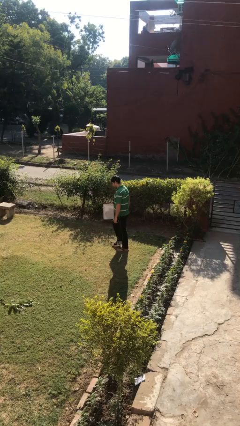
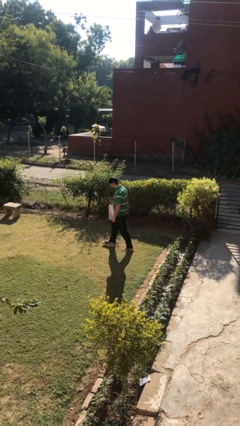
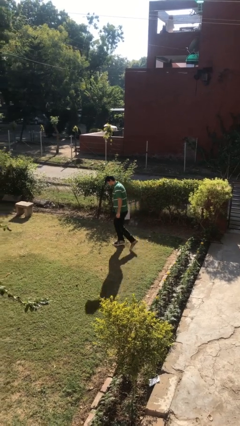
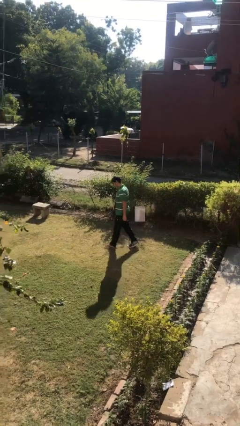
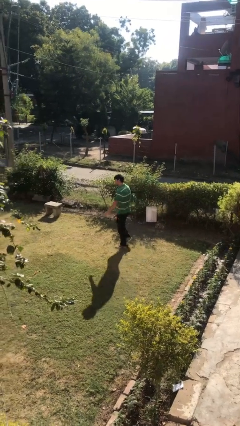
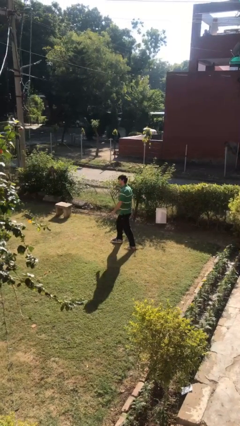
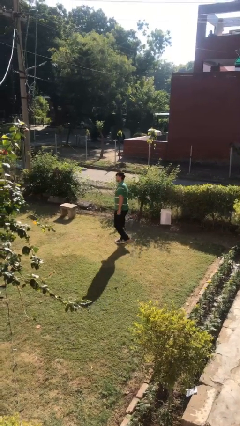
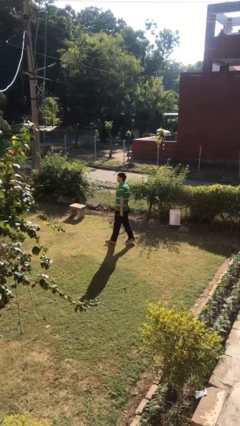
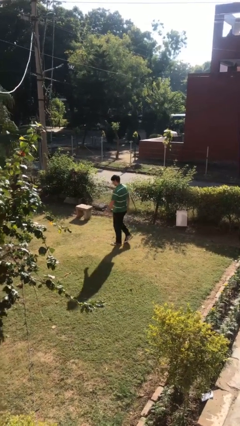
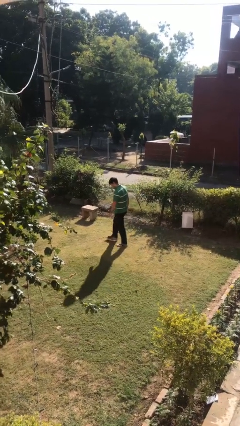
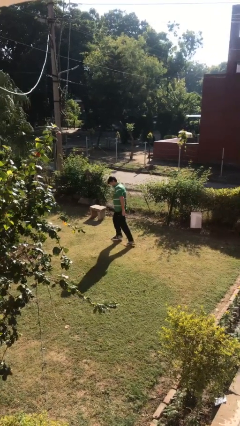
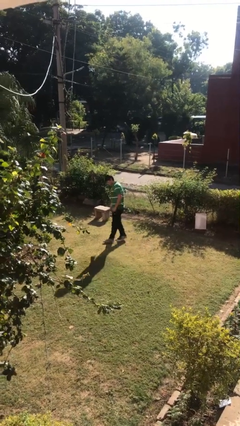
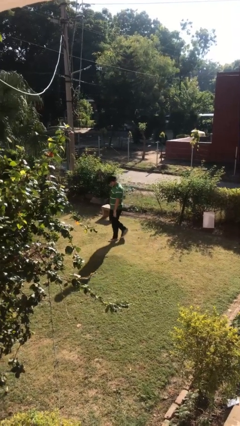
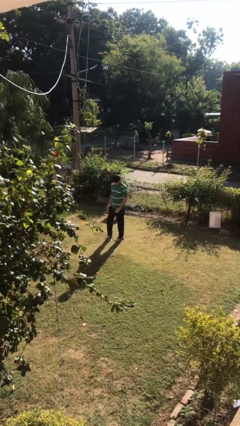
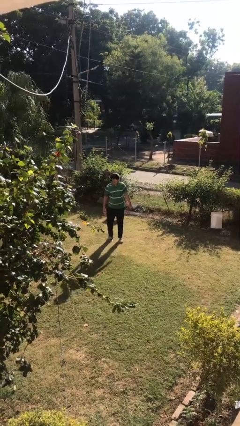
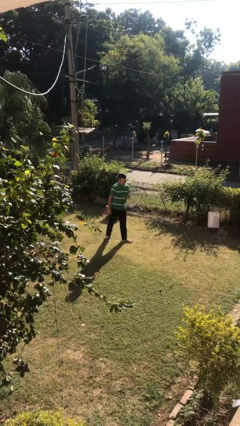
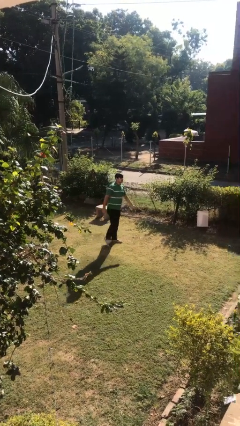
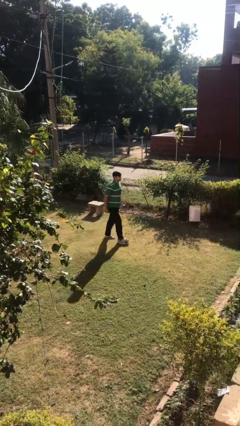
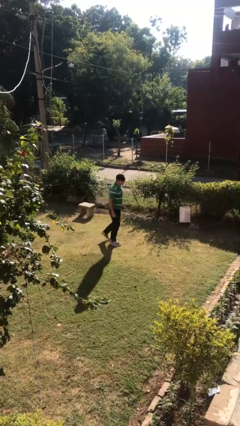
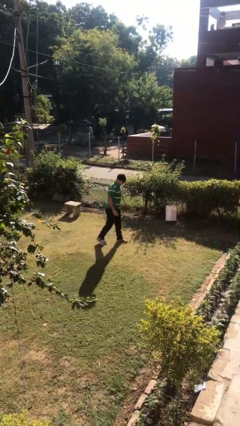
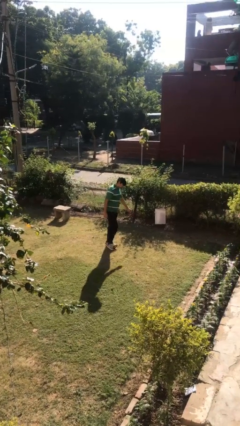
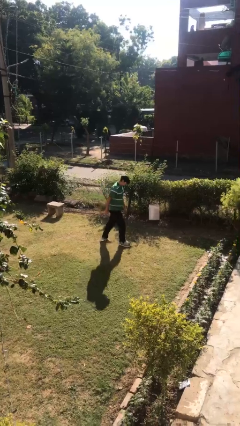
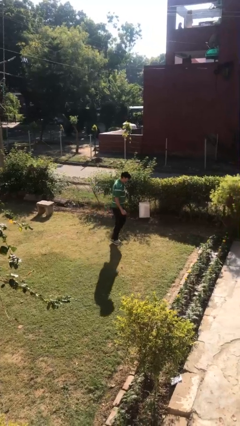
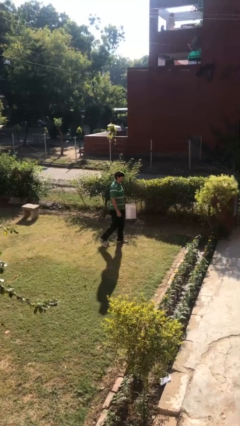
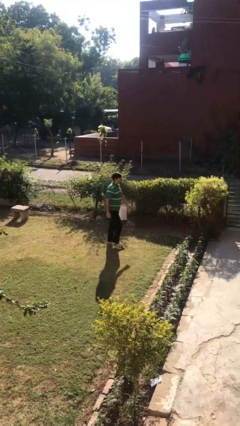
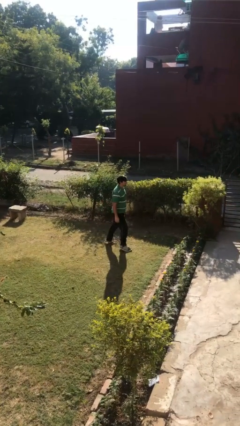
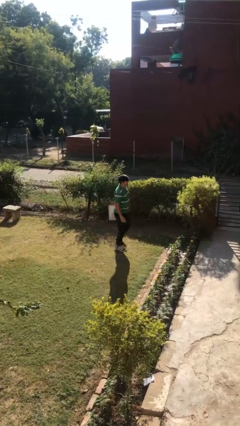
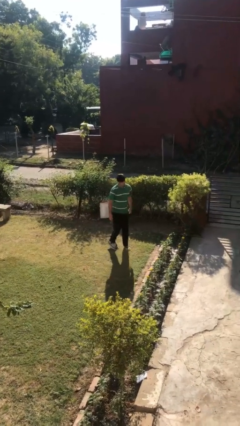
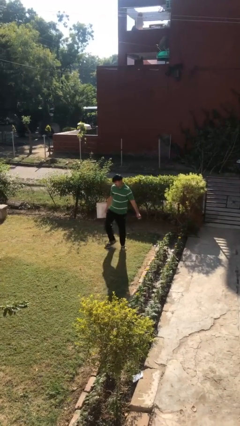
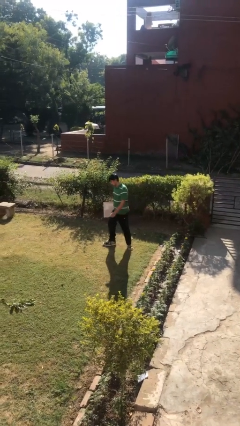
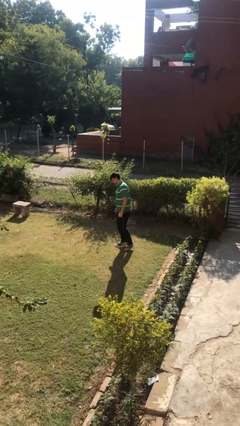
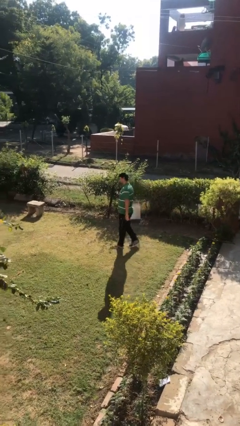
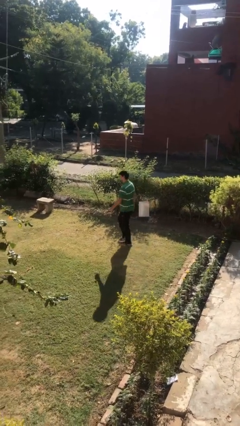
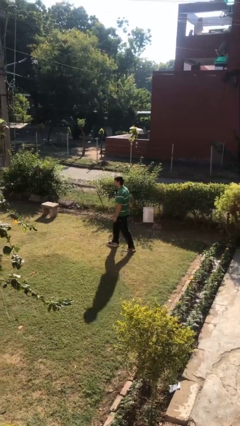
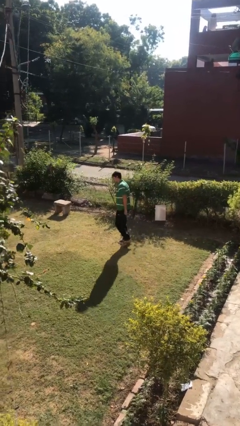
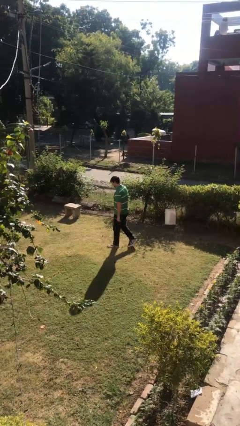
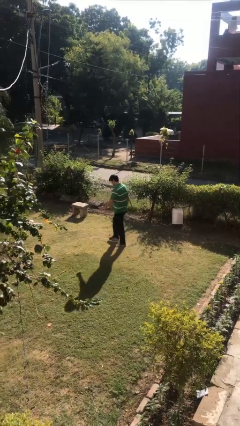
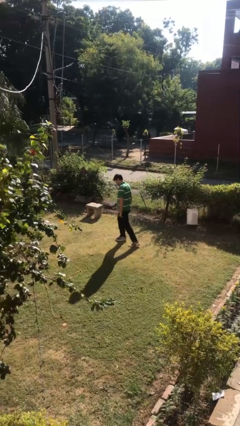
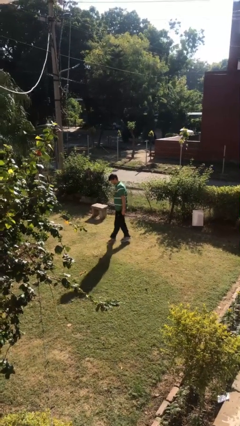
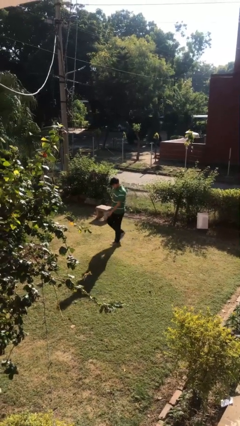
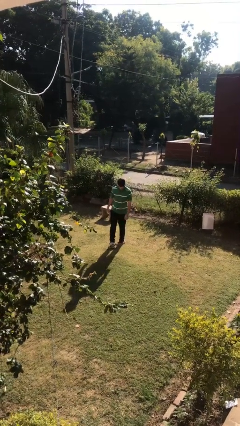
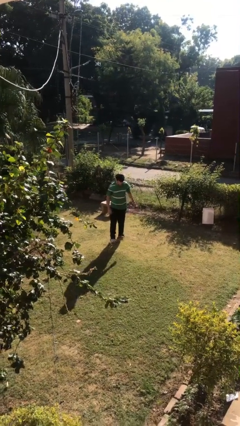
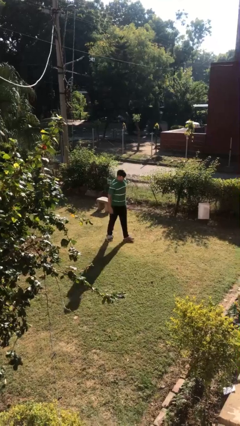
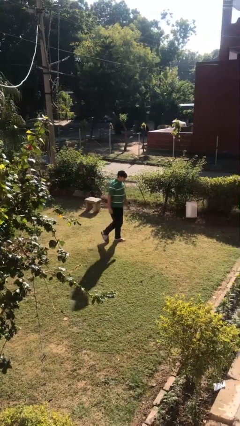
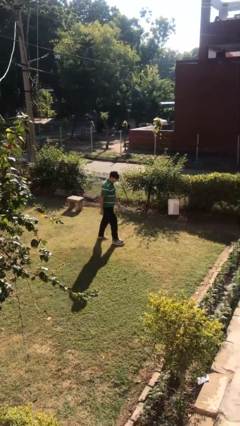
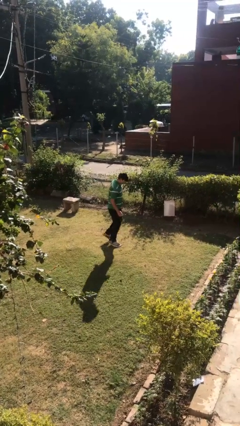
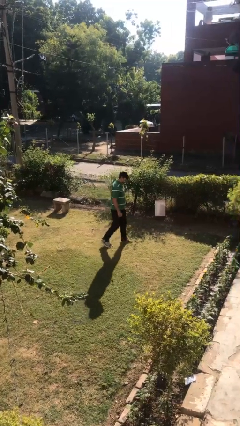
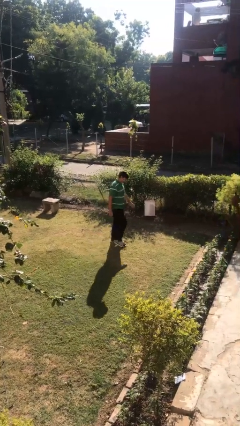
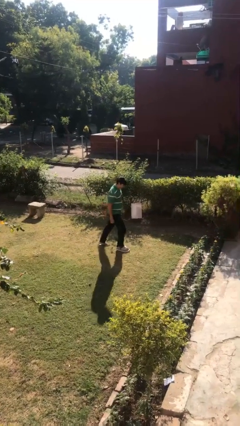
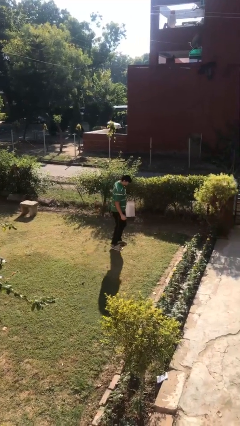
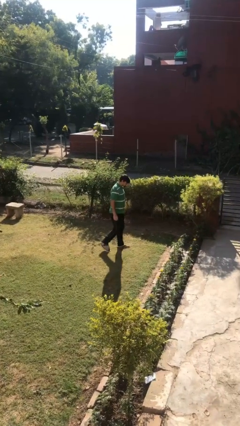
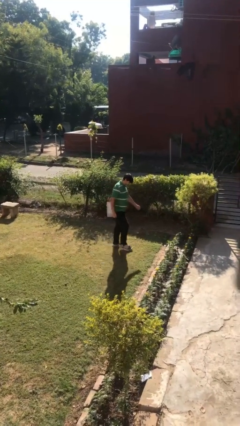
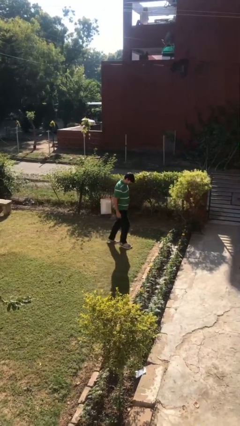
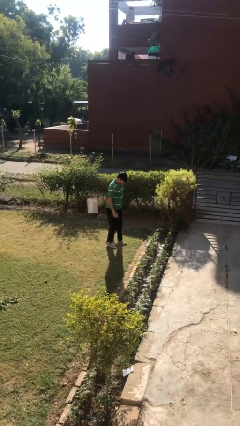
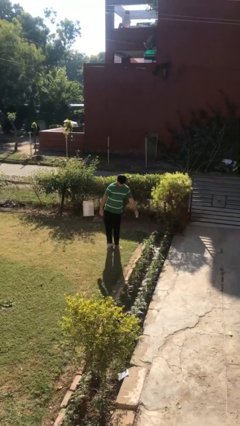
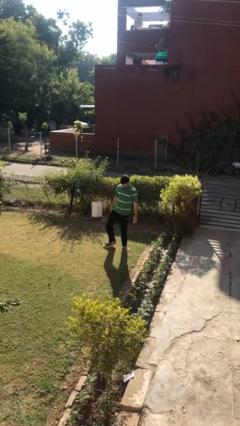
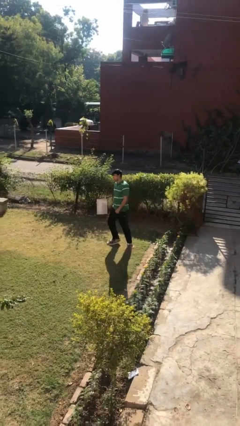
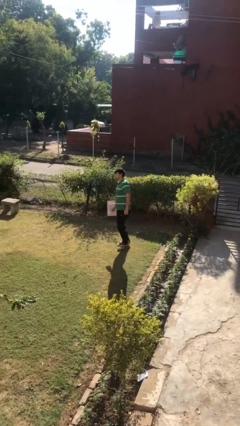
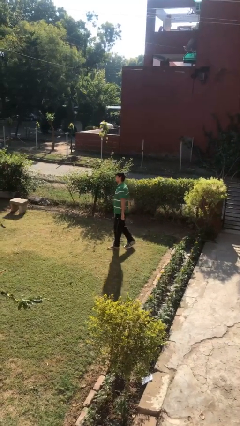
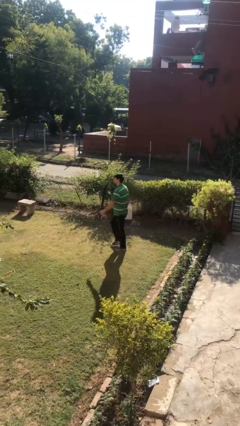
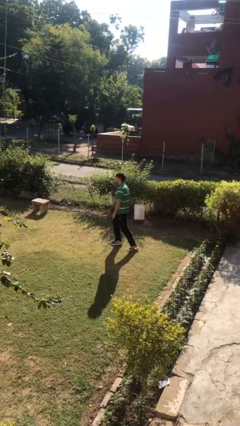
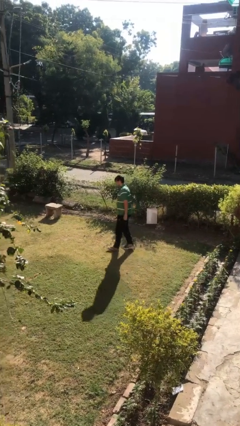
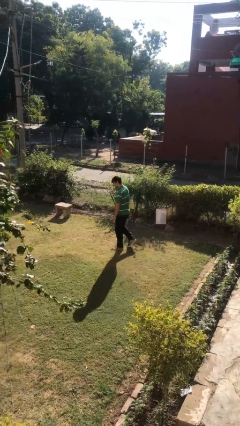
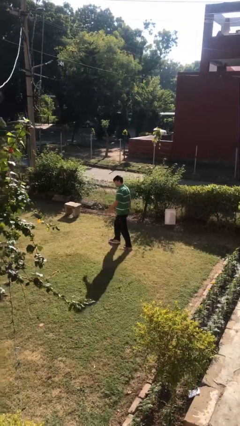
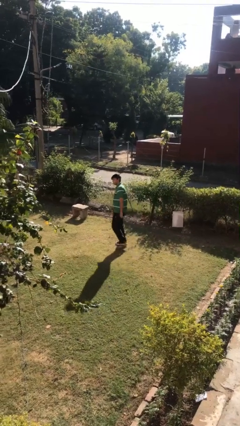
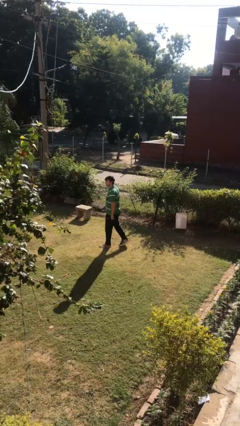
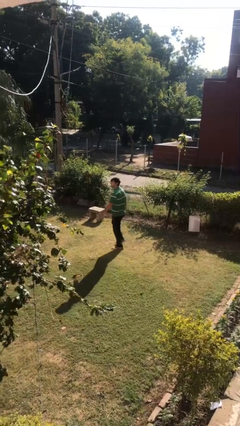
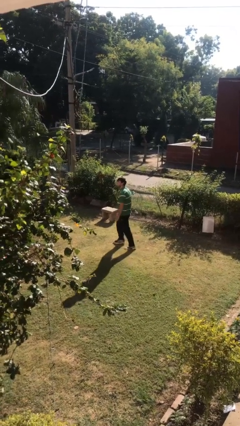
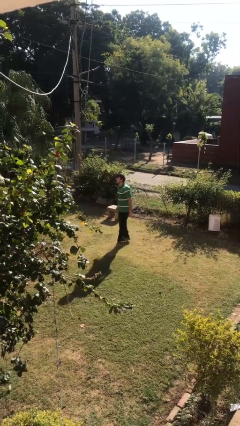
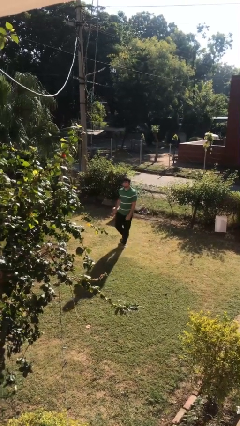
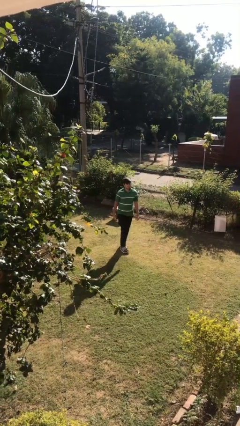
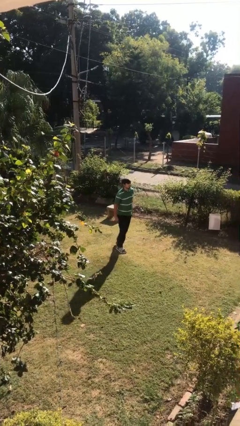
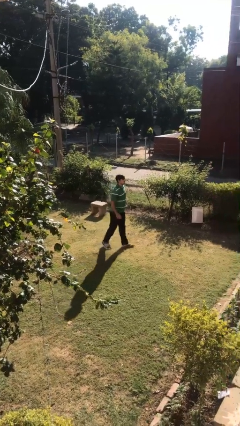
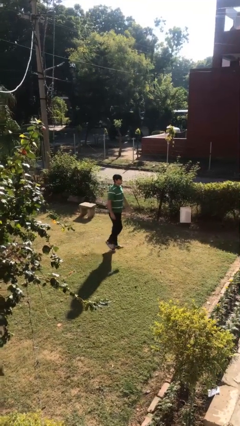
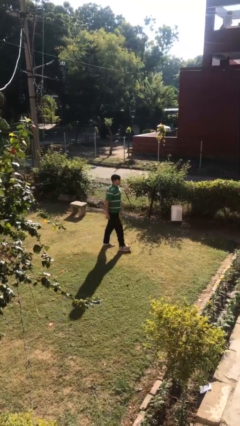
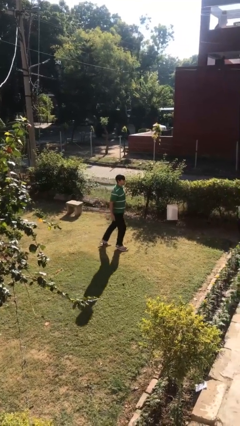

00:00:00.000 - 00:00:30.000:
person walks

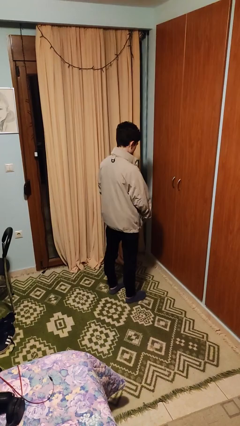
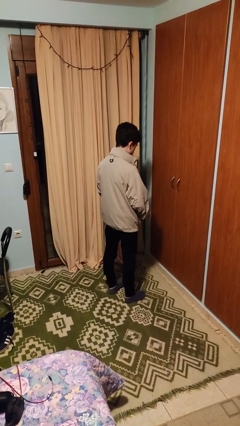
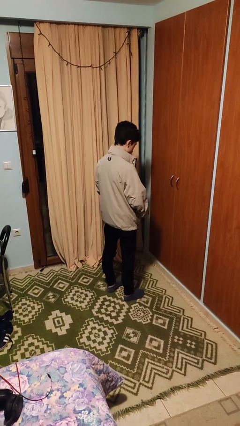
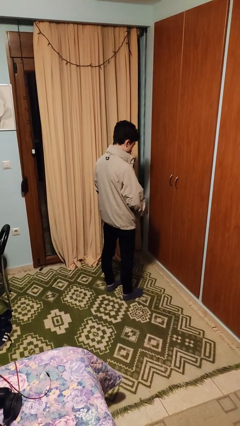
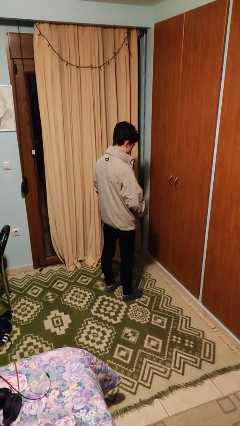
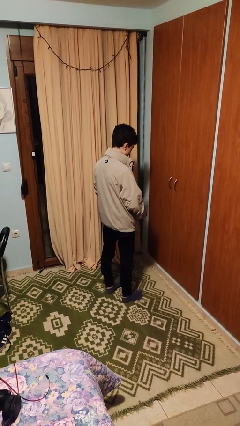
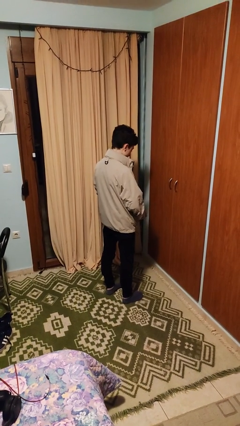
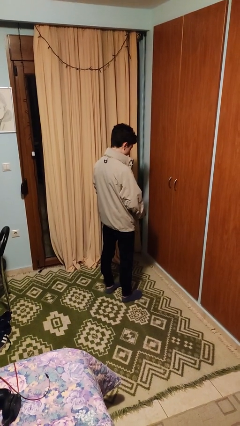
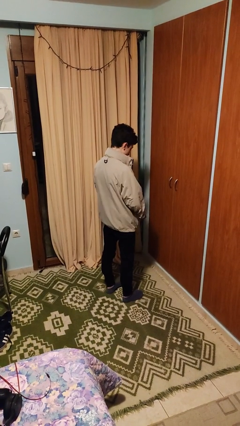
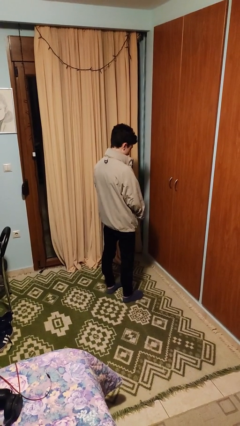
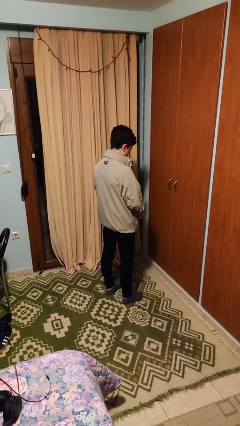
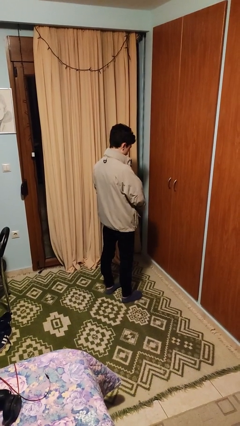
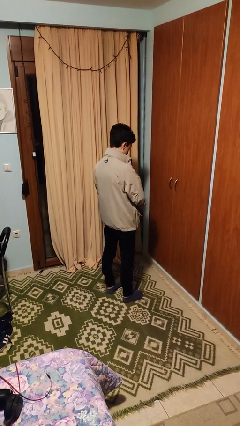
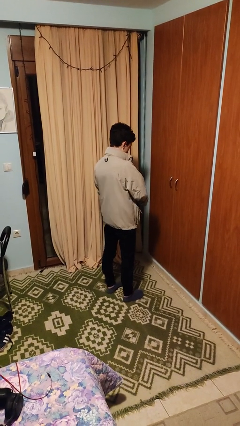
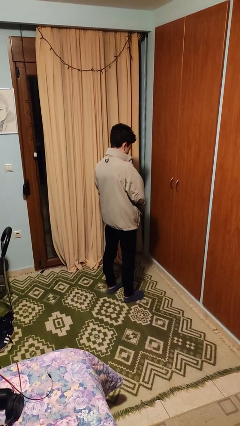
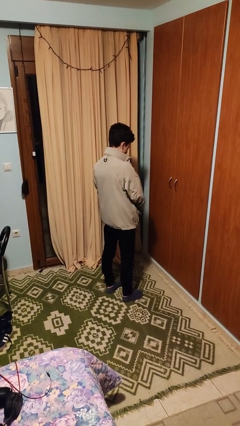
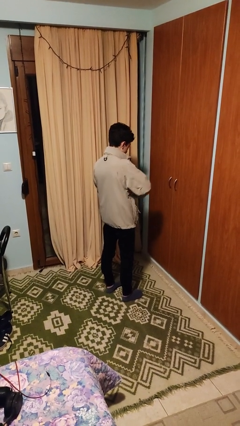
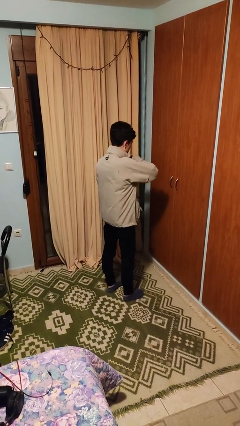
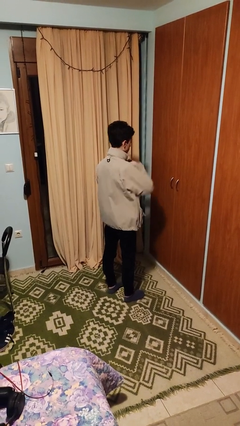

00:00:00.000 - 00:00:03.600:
person zips up jacket
